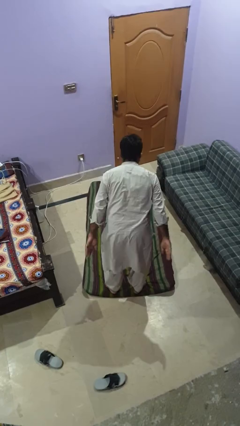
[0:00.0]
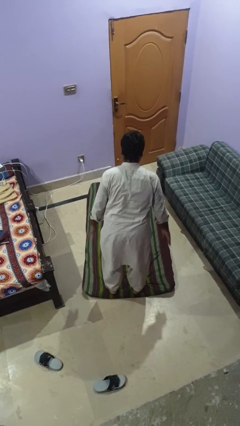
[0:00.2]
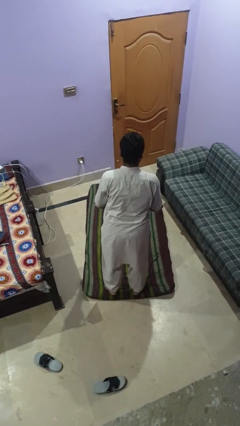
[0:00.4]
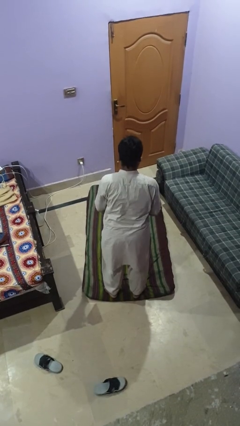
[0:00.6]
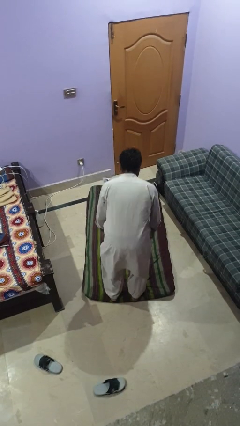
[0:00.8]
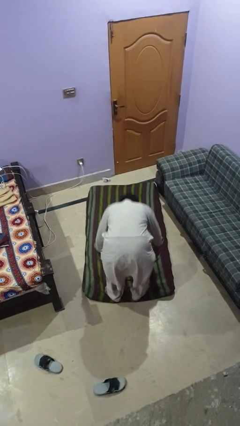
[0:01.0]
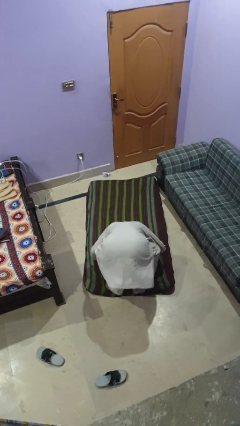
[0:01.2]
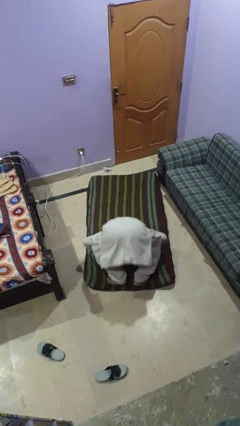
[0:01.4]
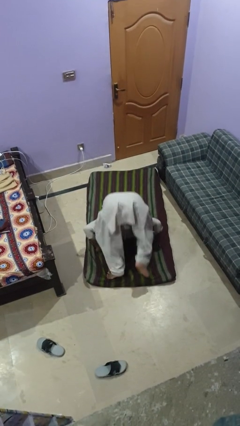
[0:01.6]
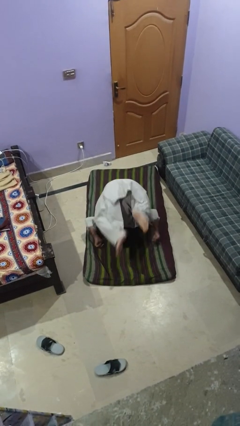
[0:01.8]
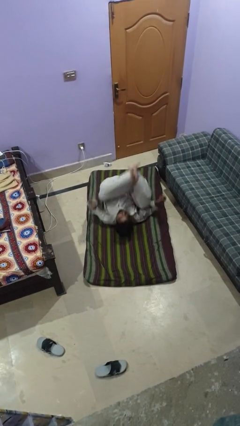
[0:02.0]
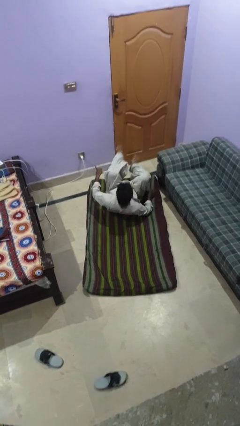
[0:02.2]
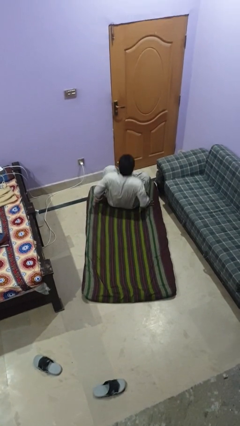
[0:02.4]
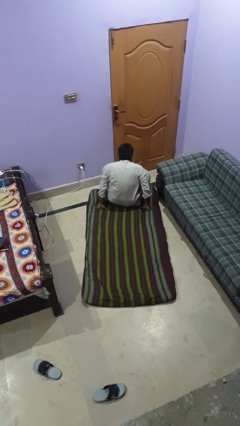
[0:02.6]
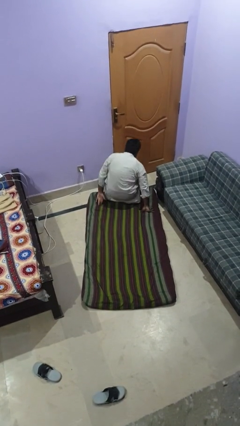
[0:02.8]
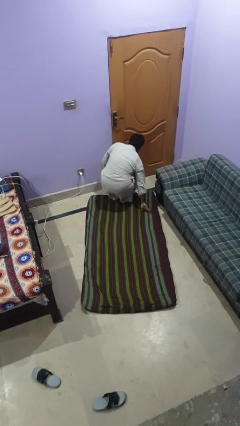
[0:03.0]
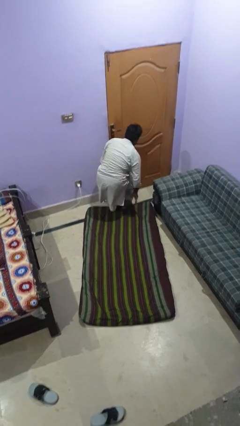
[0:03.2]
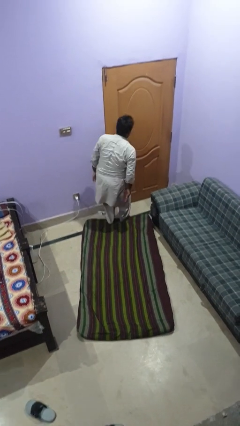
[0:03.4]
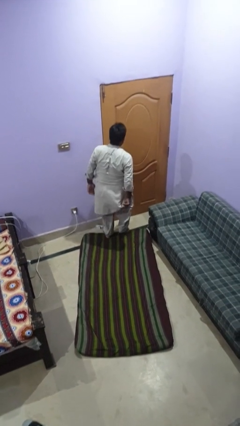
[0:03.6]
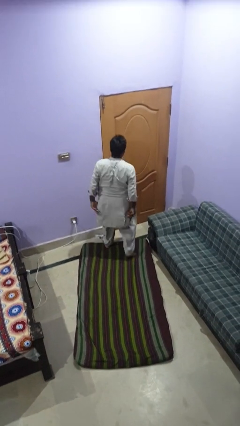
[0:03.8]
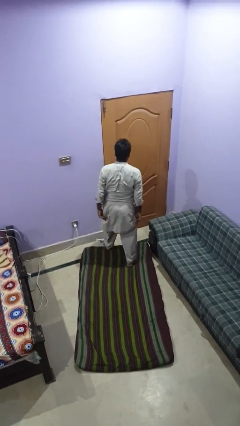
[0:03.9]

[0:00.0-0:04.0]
person somersaults

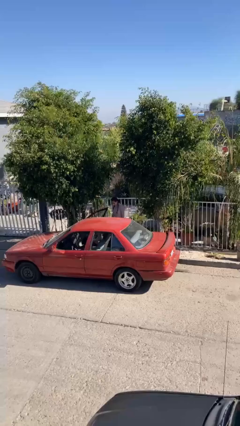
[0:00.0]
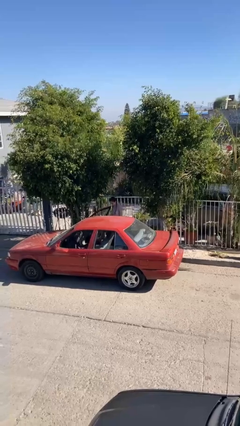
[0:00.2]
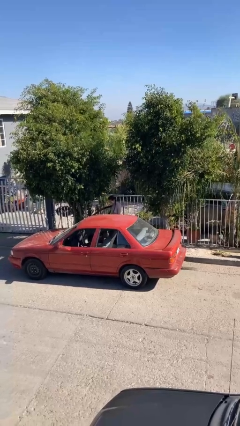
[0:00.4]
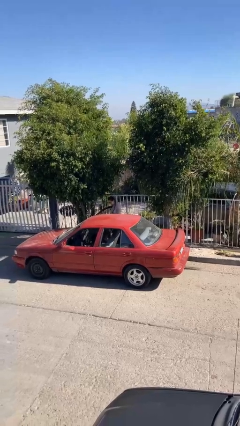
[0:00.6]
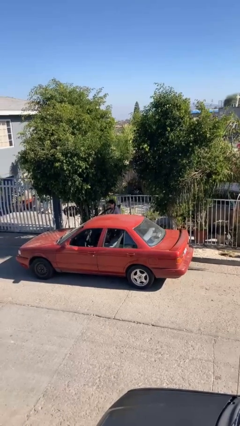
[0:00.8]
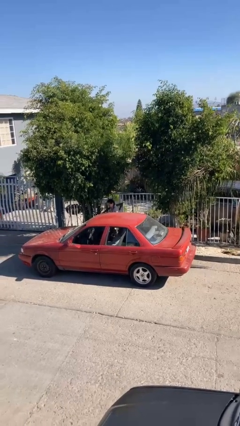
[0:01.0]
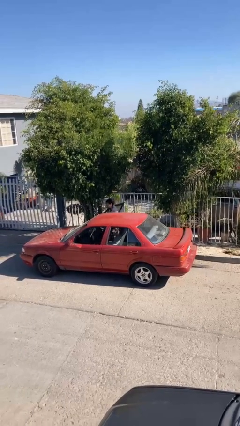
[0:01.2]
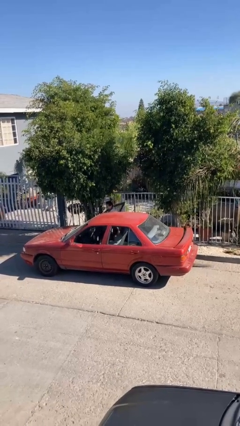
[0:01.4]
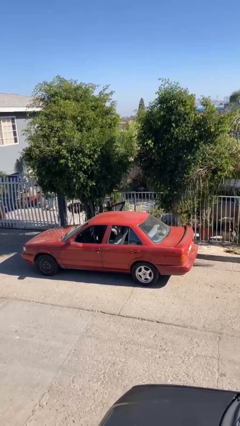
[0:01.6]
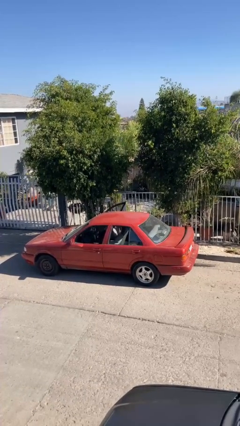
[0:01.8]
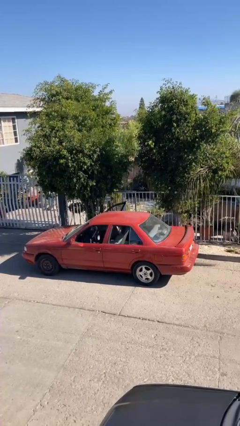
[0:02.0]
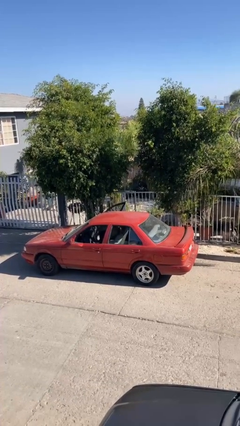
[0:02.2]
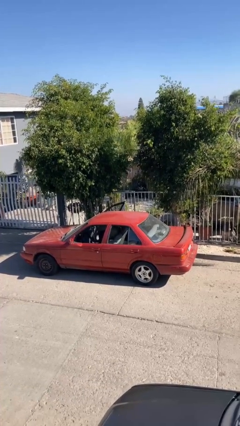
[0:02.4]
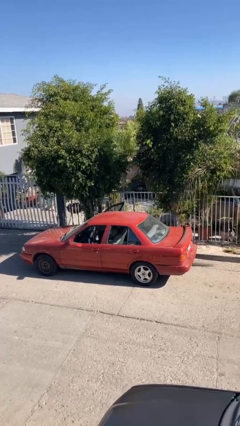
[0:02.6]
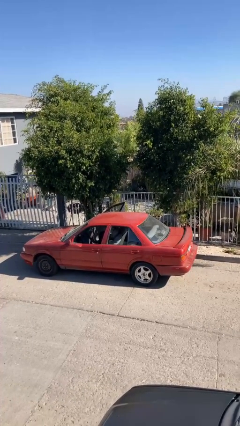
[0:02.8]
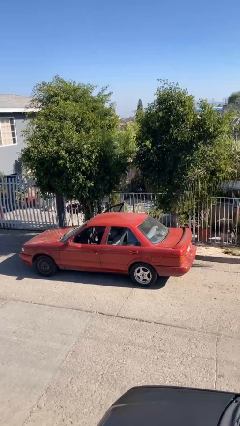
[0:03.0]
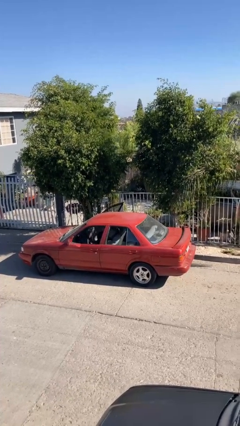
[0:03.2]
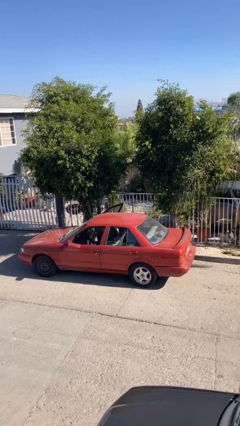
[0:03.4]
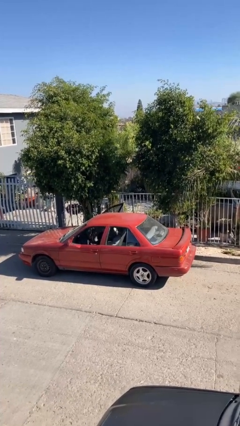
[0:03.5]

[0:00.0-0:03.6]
person enters car

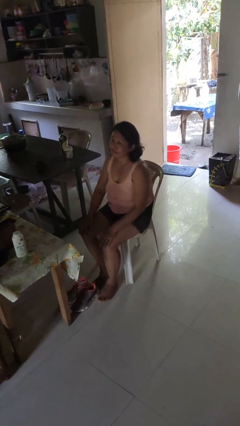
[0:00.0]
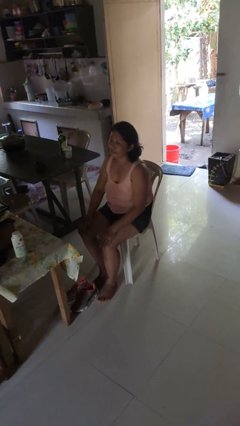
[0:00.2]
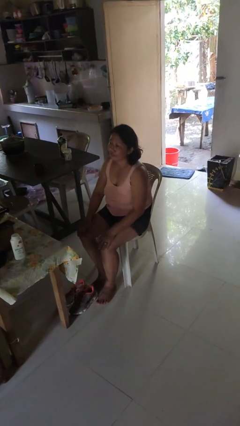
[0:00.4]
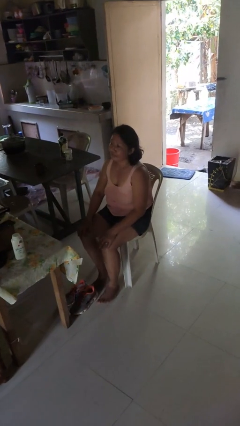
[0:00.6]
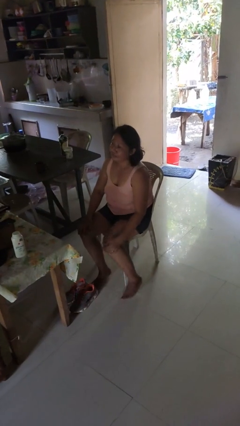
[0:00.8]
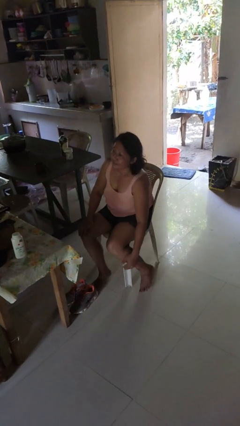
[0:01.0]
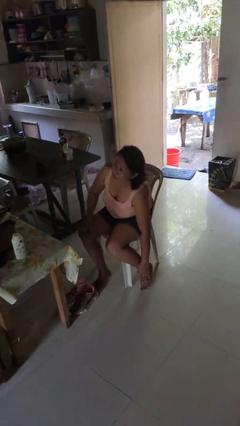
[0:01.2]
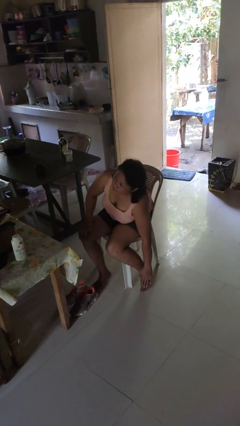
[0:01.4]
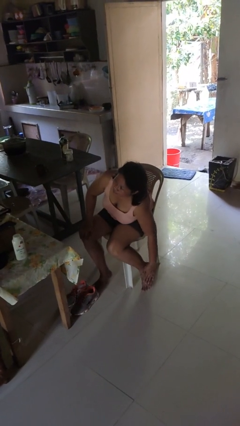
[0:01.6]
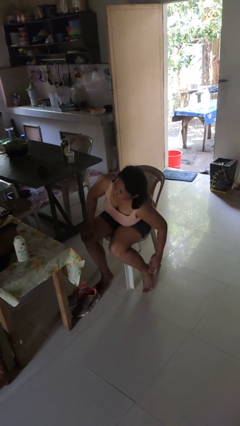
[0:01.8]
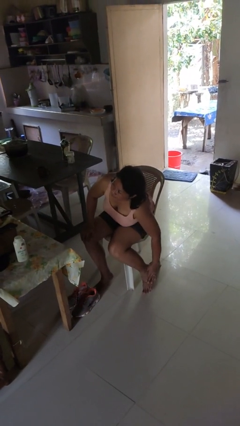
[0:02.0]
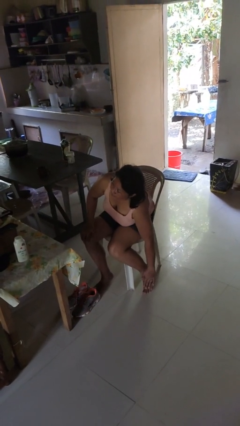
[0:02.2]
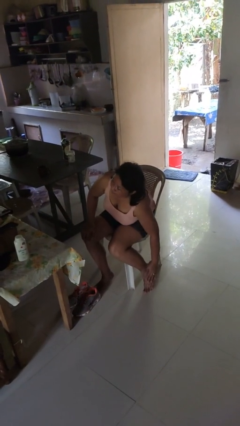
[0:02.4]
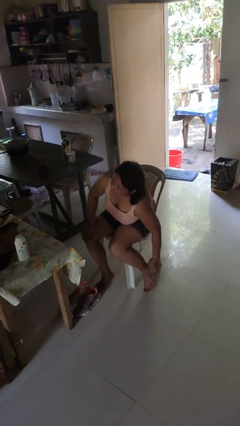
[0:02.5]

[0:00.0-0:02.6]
person rubs foot

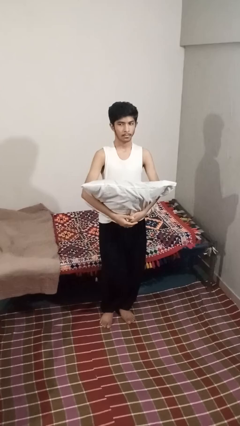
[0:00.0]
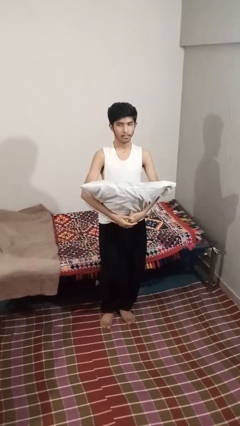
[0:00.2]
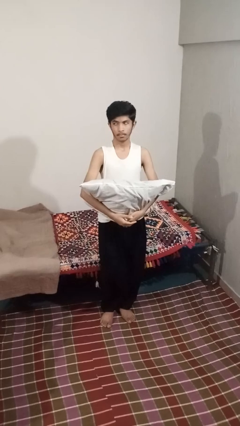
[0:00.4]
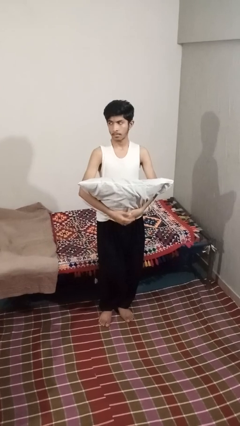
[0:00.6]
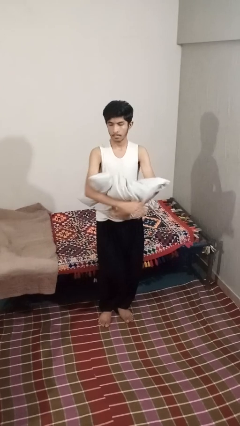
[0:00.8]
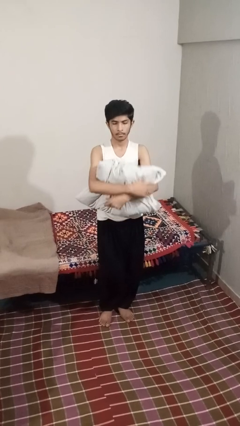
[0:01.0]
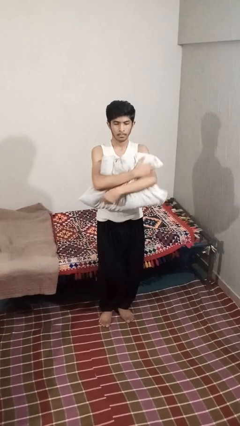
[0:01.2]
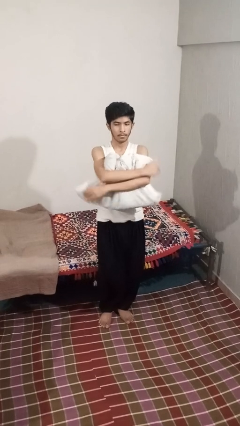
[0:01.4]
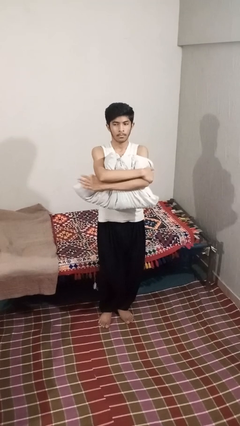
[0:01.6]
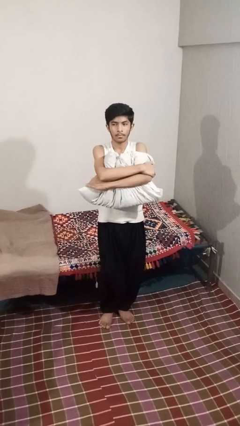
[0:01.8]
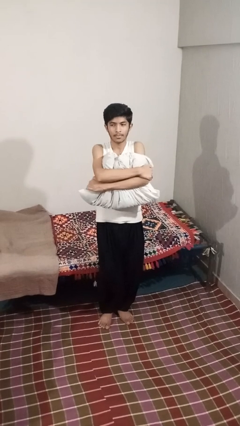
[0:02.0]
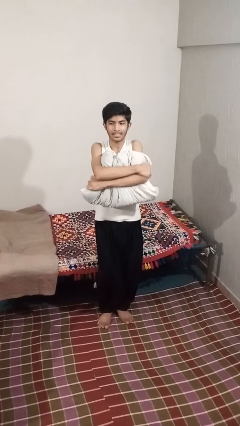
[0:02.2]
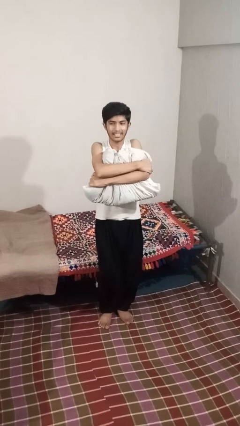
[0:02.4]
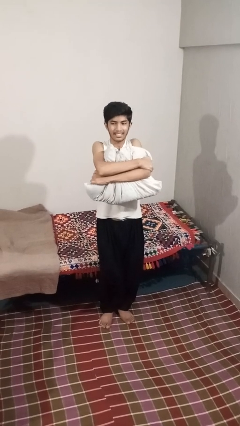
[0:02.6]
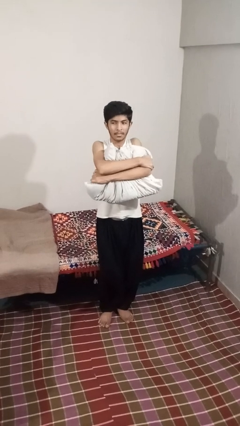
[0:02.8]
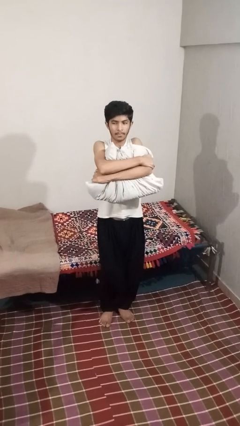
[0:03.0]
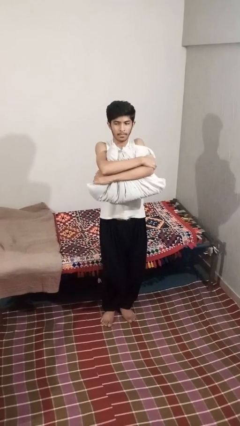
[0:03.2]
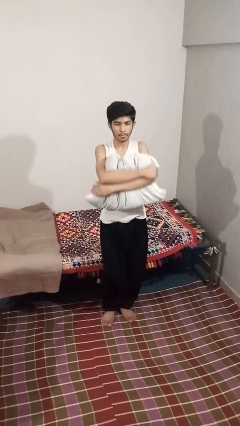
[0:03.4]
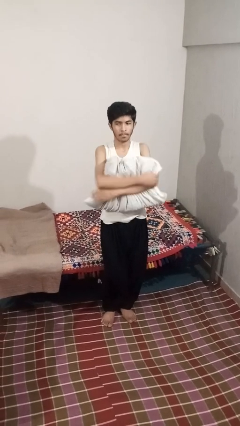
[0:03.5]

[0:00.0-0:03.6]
person squeezes object

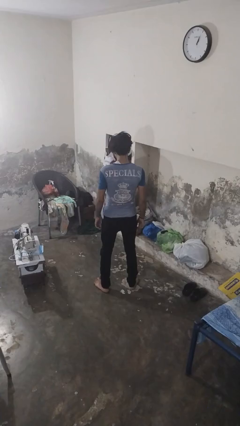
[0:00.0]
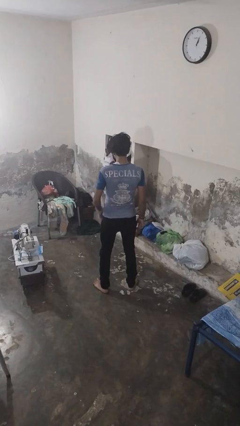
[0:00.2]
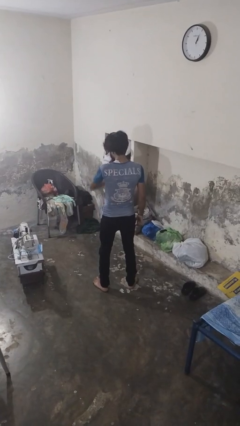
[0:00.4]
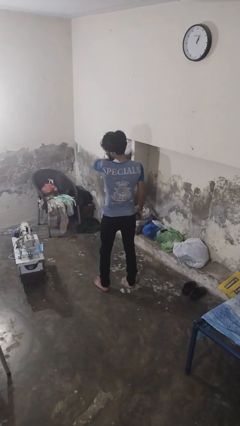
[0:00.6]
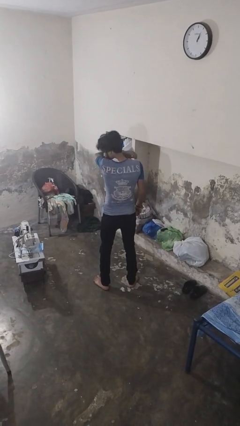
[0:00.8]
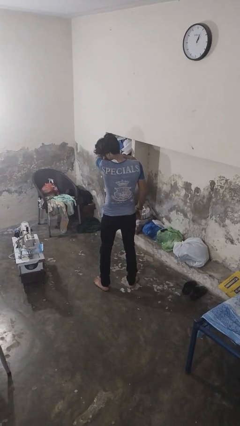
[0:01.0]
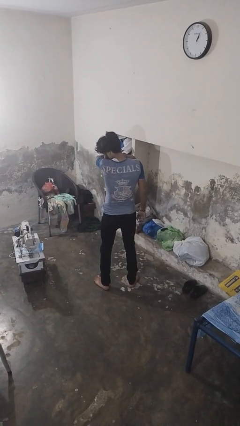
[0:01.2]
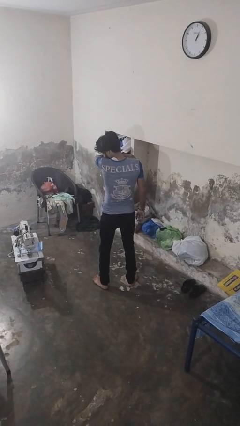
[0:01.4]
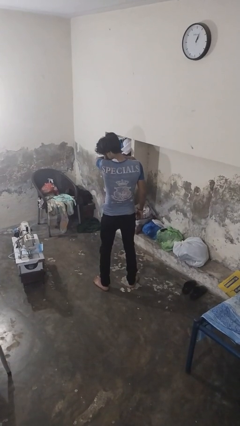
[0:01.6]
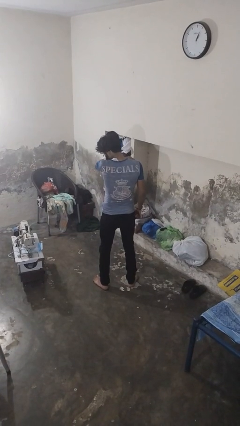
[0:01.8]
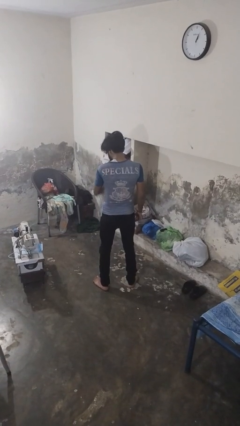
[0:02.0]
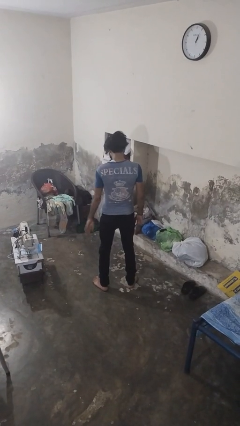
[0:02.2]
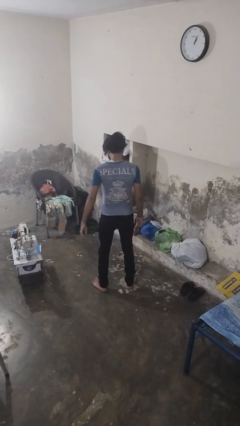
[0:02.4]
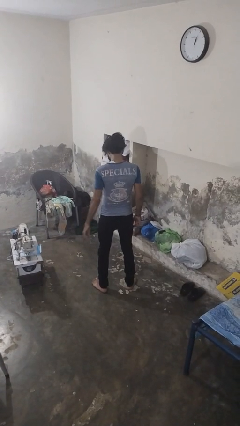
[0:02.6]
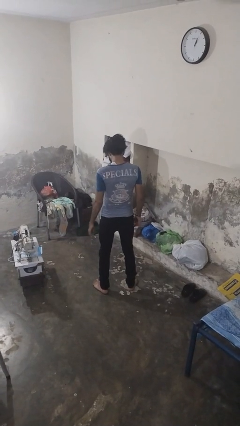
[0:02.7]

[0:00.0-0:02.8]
person sneezes into arm

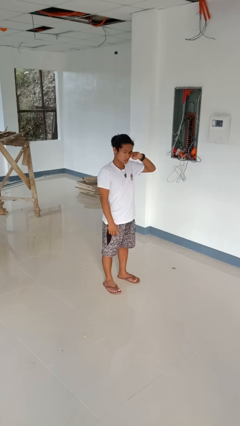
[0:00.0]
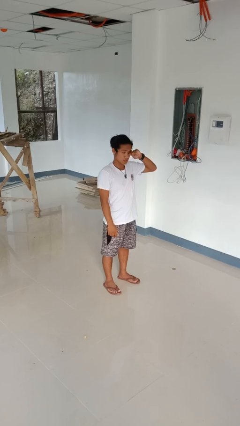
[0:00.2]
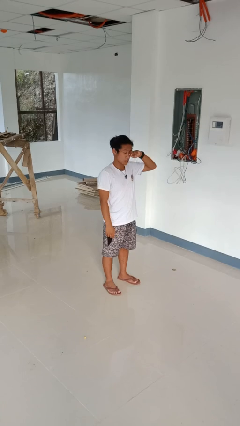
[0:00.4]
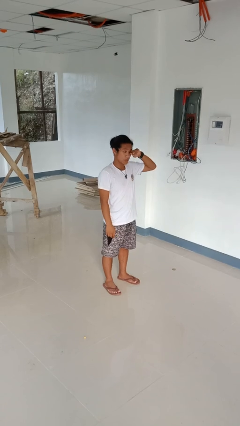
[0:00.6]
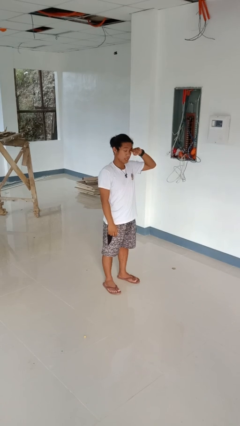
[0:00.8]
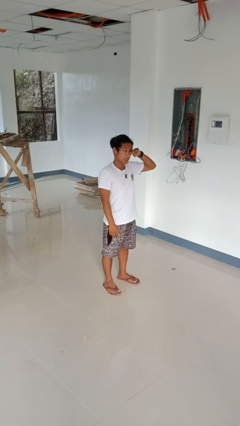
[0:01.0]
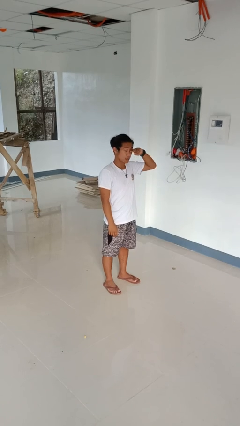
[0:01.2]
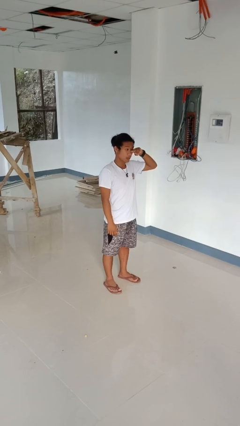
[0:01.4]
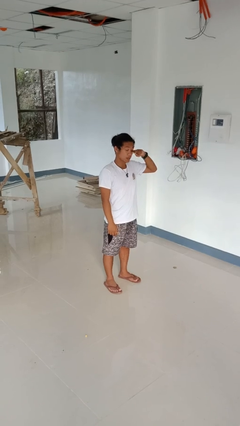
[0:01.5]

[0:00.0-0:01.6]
person rubs eyes
